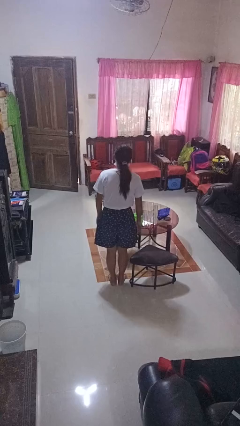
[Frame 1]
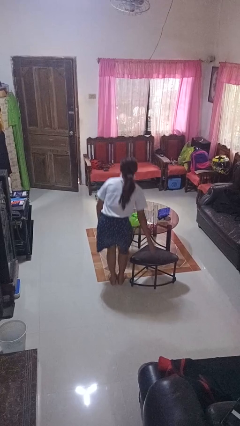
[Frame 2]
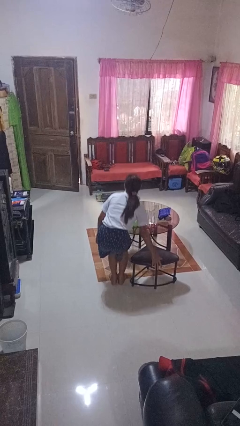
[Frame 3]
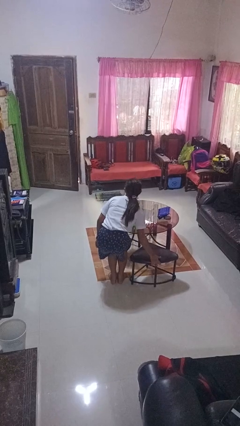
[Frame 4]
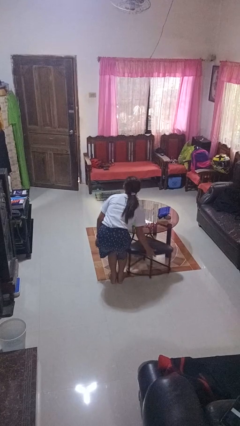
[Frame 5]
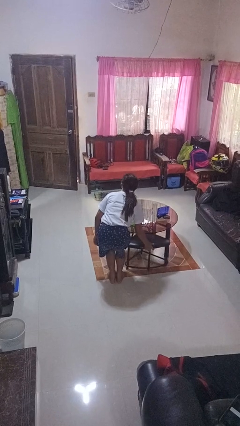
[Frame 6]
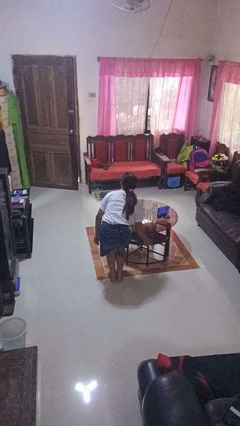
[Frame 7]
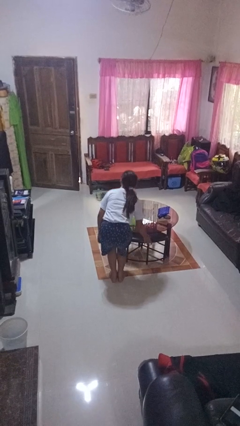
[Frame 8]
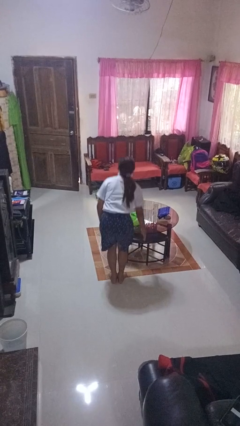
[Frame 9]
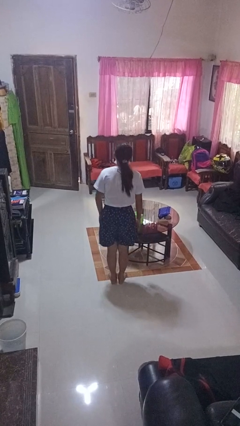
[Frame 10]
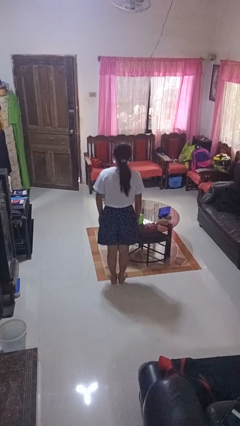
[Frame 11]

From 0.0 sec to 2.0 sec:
person pushes in chair

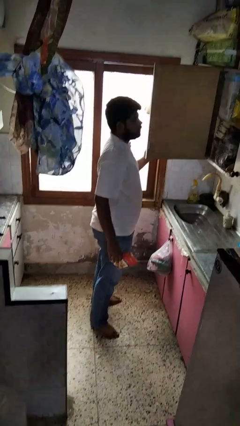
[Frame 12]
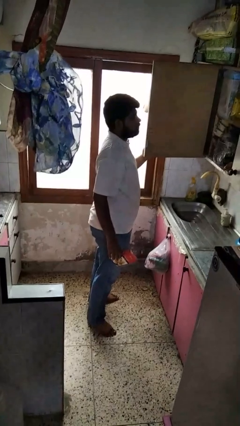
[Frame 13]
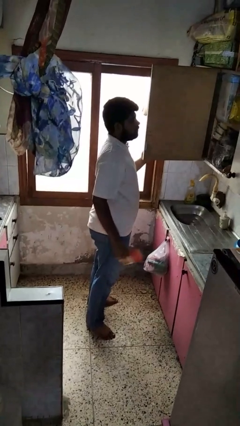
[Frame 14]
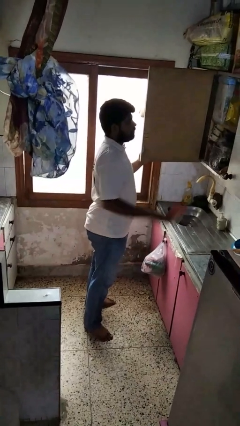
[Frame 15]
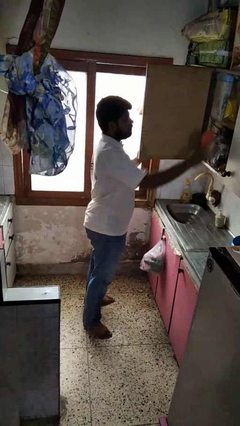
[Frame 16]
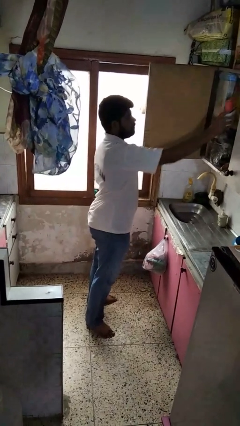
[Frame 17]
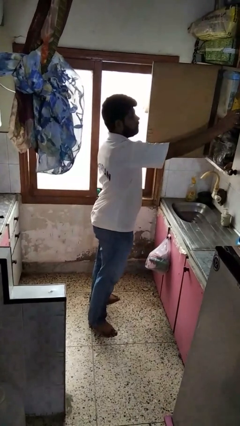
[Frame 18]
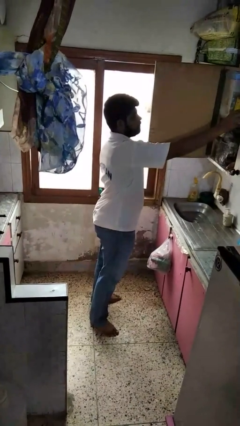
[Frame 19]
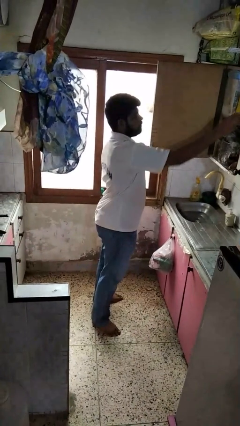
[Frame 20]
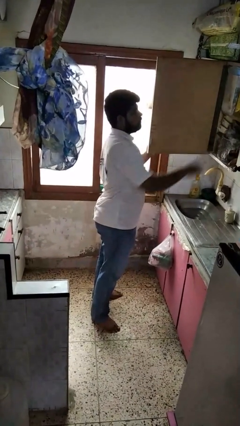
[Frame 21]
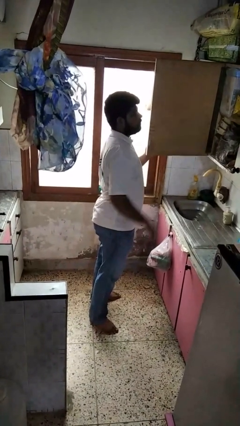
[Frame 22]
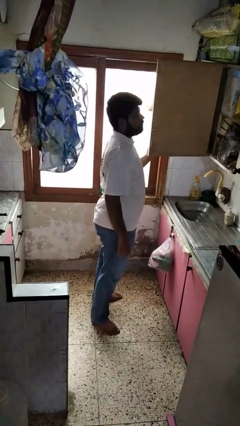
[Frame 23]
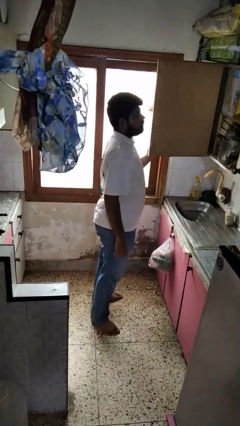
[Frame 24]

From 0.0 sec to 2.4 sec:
person puts down object into cabinet

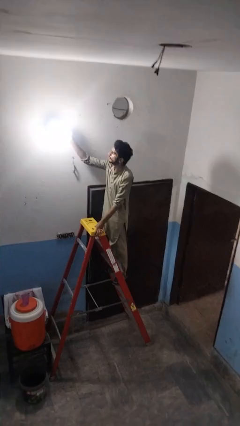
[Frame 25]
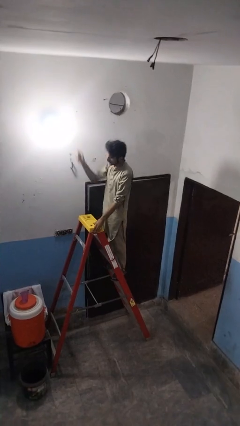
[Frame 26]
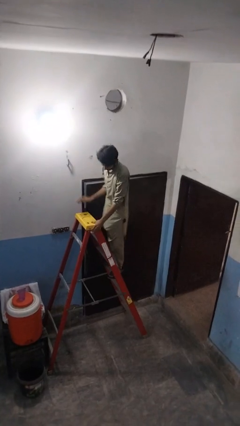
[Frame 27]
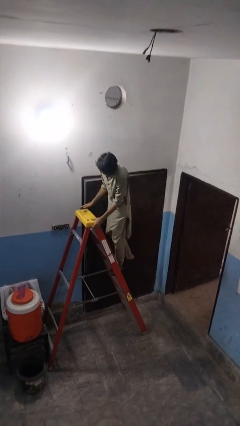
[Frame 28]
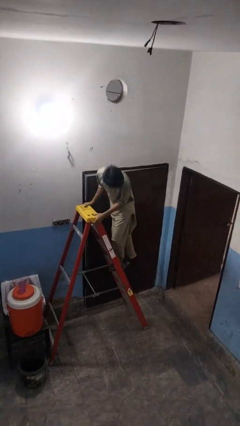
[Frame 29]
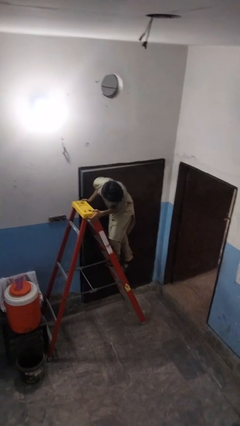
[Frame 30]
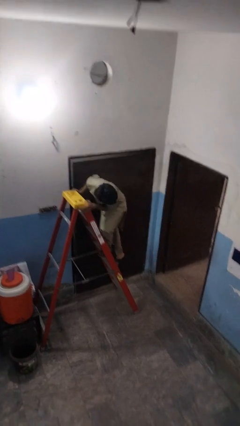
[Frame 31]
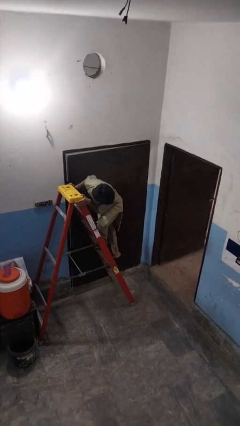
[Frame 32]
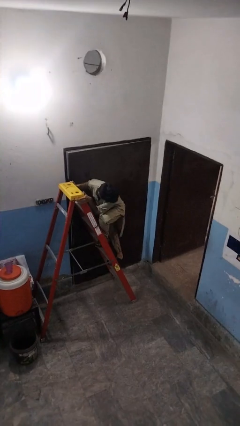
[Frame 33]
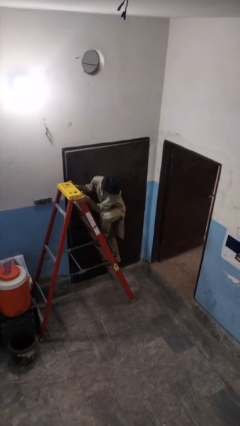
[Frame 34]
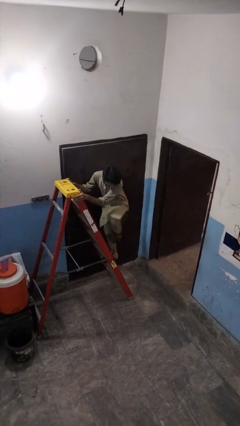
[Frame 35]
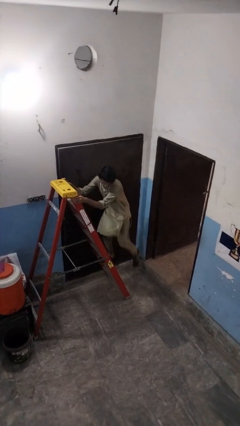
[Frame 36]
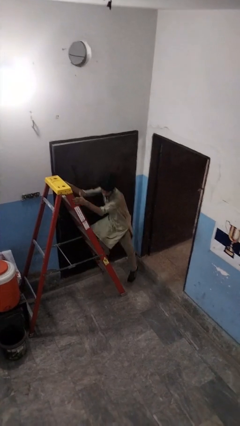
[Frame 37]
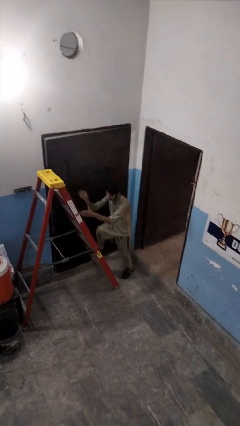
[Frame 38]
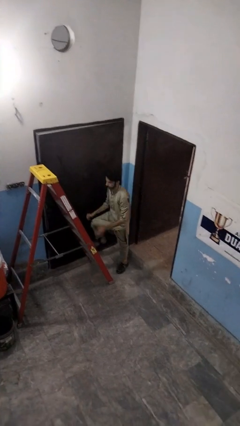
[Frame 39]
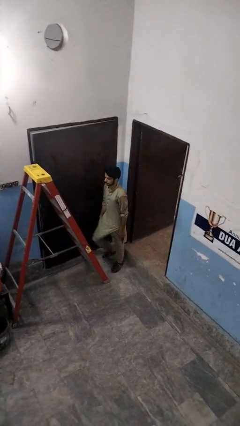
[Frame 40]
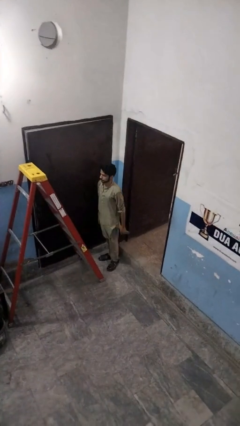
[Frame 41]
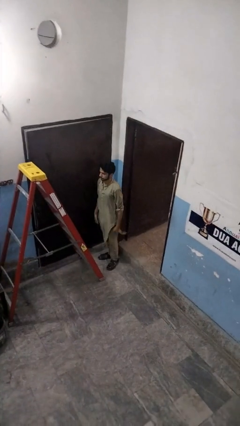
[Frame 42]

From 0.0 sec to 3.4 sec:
person climbs down ladder

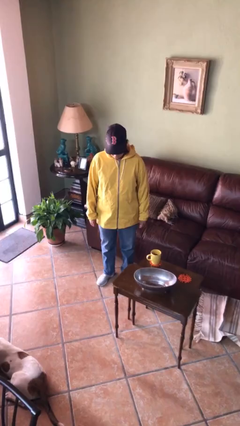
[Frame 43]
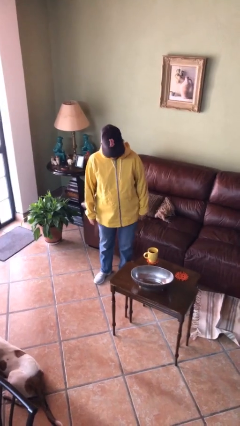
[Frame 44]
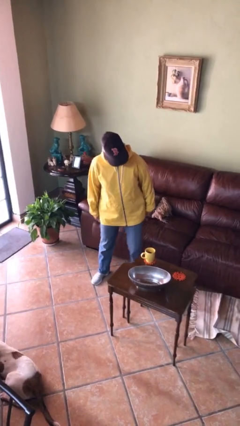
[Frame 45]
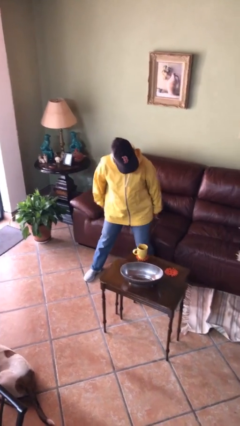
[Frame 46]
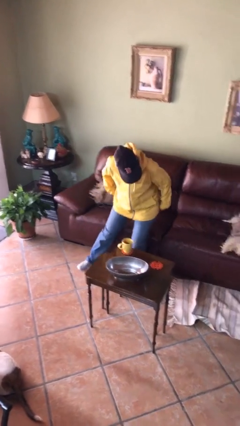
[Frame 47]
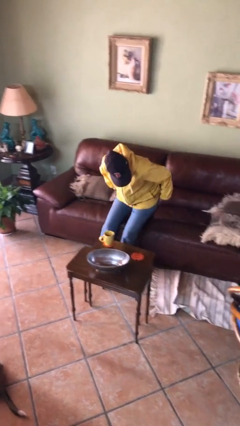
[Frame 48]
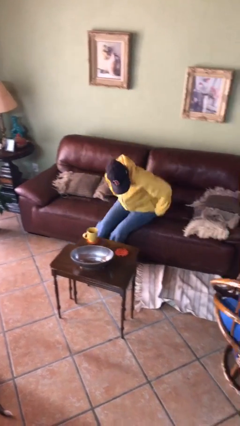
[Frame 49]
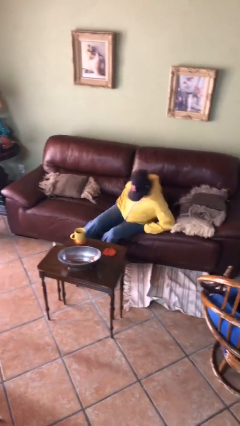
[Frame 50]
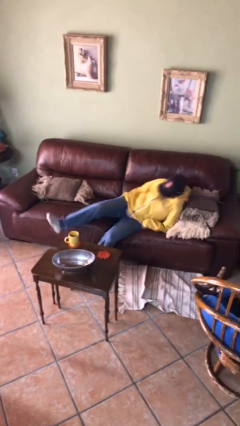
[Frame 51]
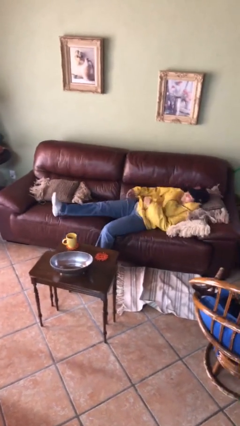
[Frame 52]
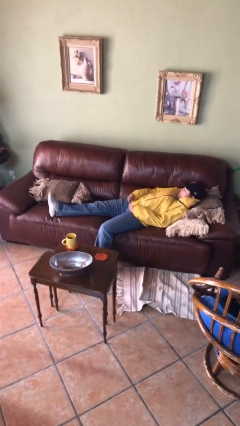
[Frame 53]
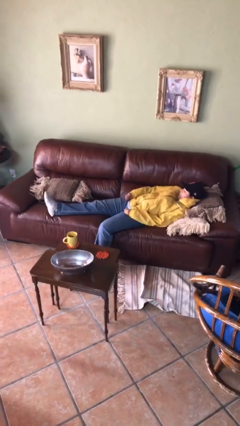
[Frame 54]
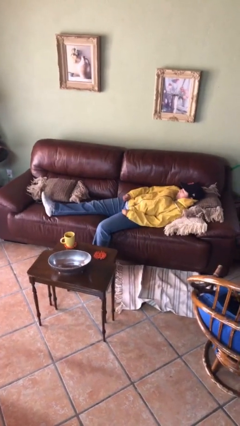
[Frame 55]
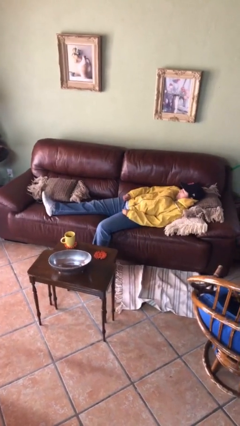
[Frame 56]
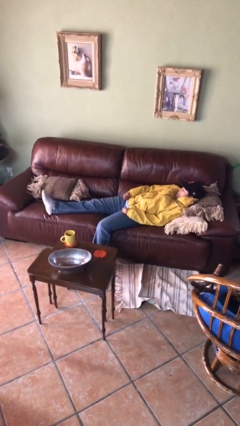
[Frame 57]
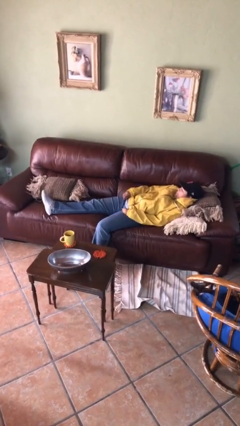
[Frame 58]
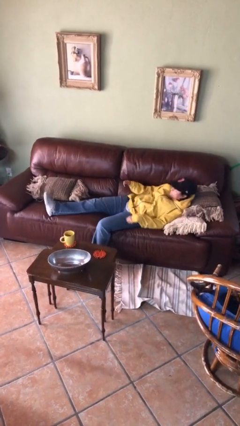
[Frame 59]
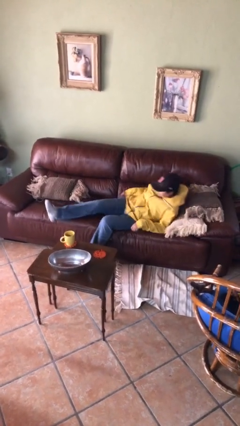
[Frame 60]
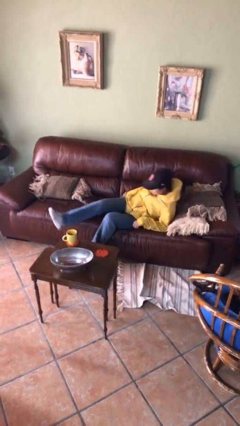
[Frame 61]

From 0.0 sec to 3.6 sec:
person lies down on couch

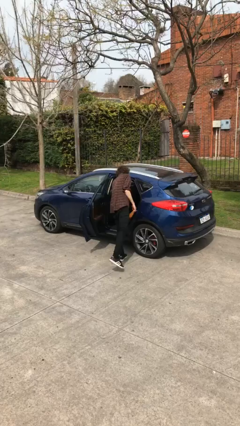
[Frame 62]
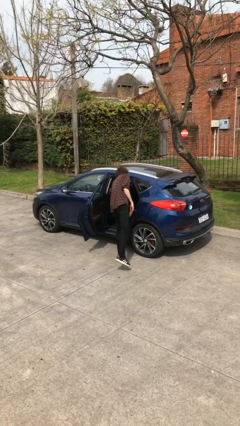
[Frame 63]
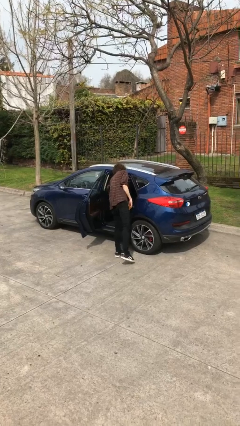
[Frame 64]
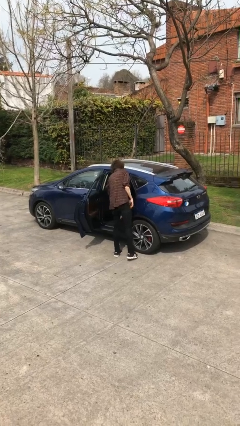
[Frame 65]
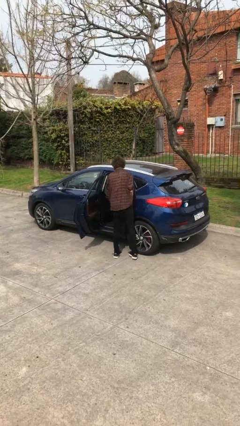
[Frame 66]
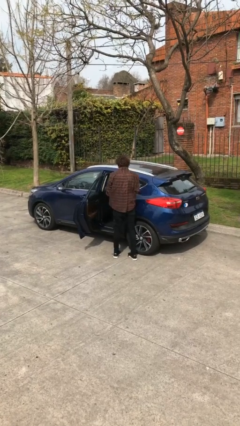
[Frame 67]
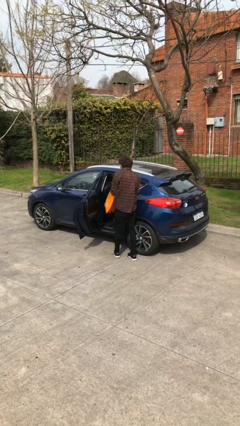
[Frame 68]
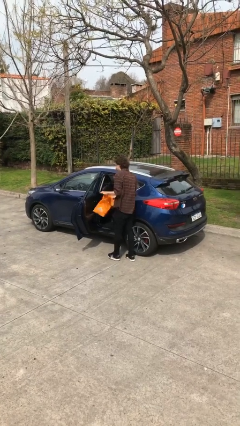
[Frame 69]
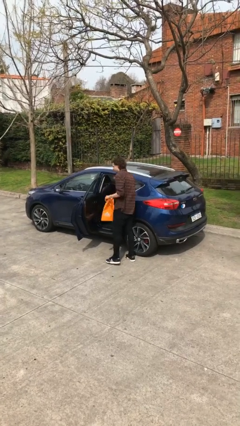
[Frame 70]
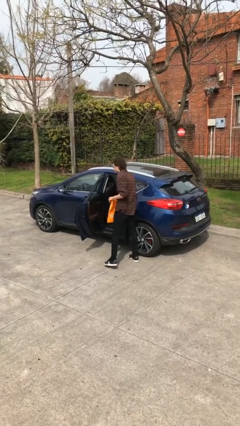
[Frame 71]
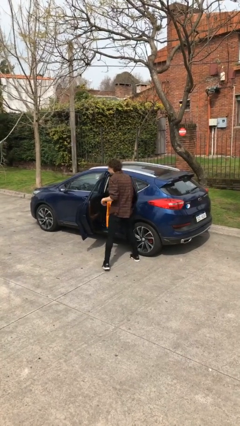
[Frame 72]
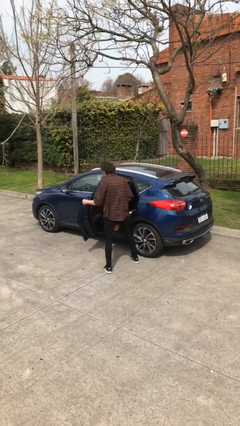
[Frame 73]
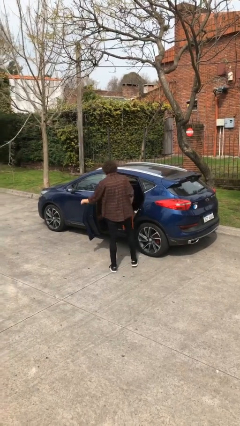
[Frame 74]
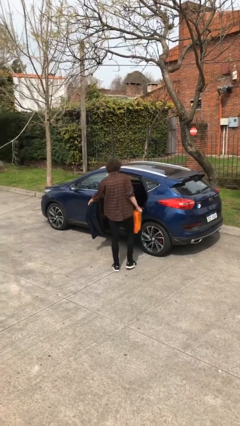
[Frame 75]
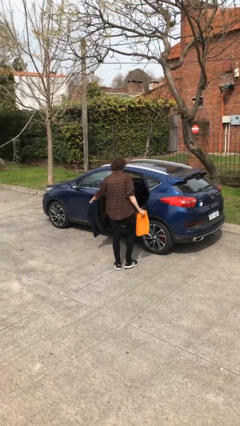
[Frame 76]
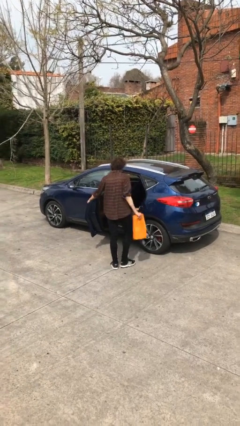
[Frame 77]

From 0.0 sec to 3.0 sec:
person unloads car

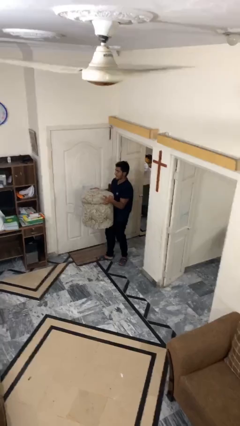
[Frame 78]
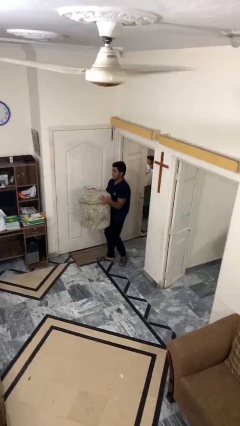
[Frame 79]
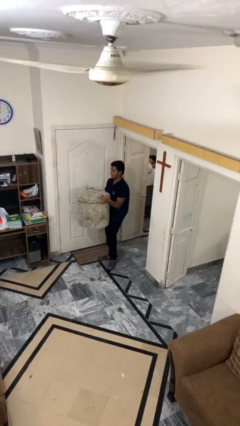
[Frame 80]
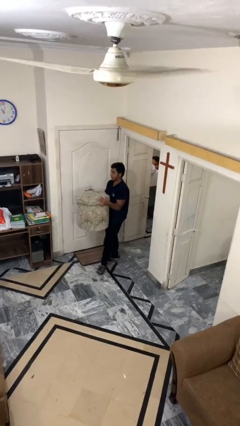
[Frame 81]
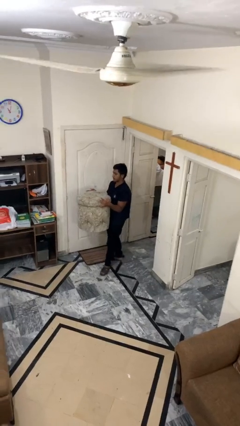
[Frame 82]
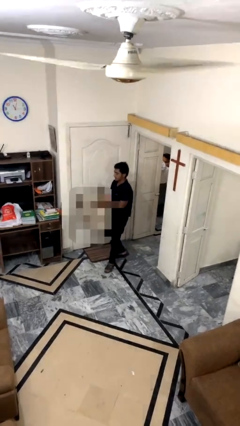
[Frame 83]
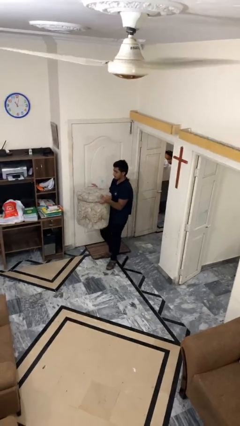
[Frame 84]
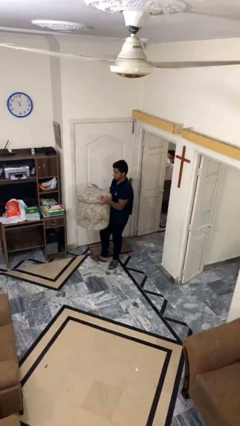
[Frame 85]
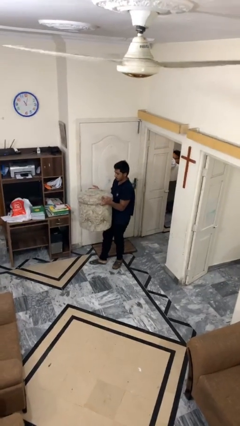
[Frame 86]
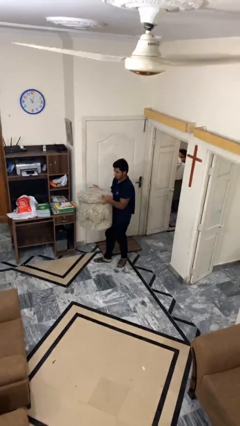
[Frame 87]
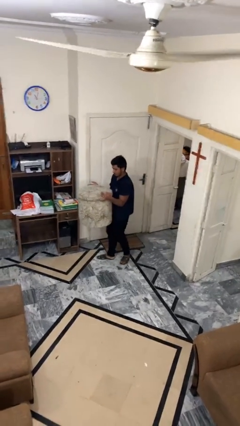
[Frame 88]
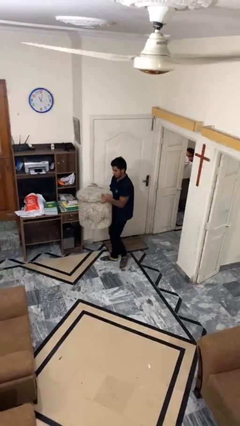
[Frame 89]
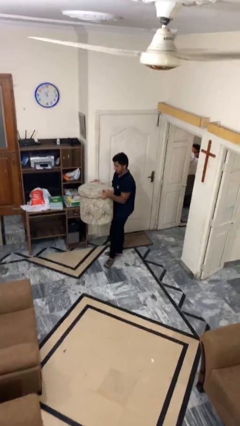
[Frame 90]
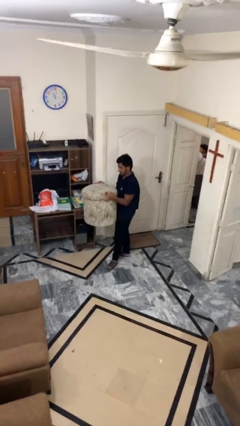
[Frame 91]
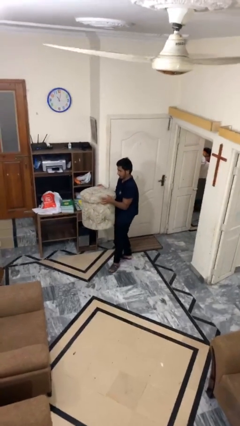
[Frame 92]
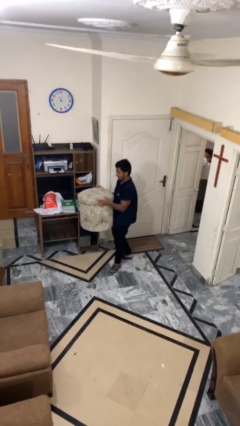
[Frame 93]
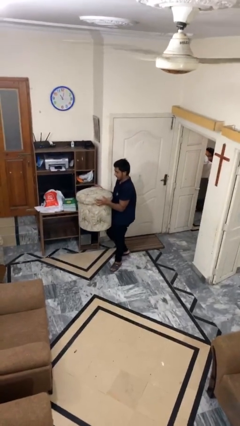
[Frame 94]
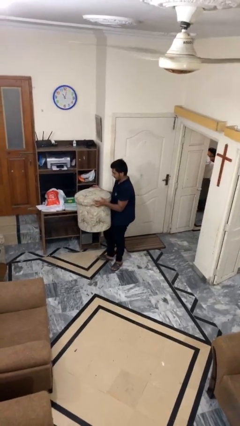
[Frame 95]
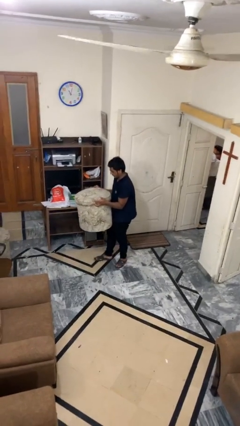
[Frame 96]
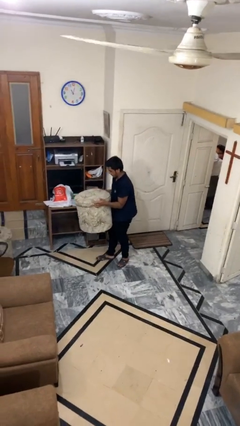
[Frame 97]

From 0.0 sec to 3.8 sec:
person carries heavy object
